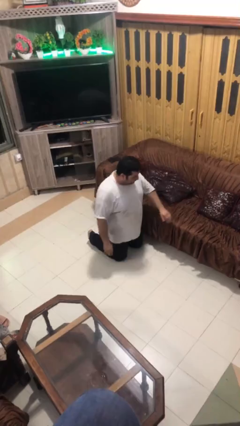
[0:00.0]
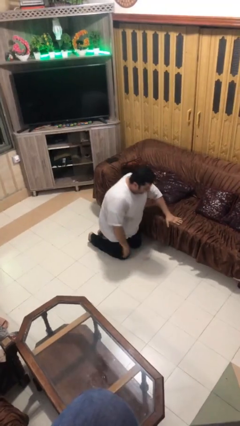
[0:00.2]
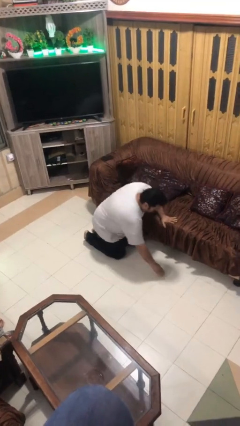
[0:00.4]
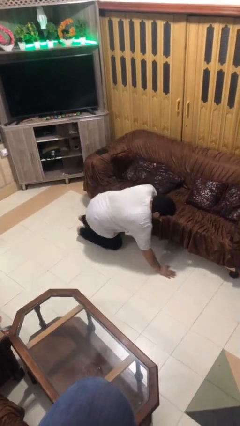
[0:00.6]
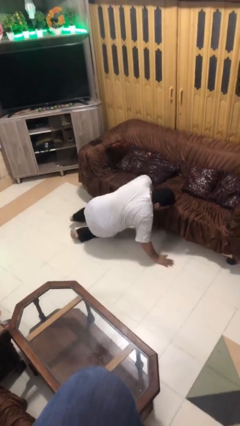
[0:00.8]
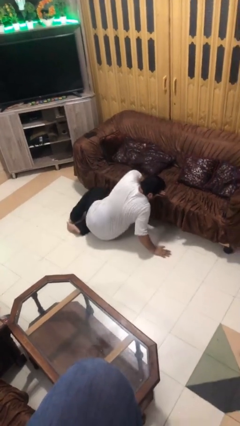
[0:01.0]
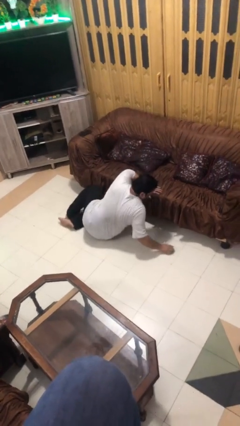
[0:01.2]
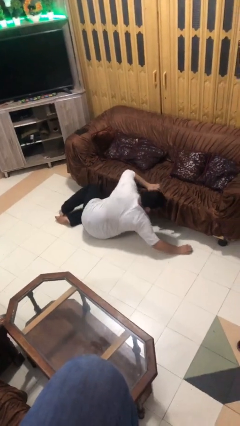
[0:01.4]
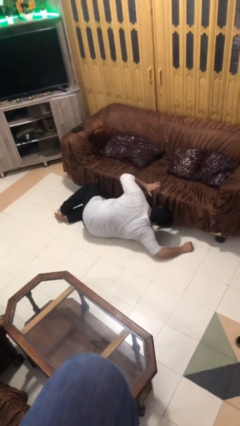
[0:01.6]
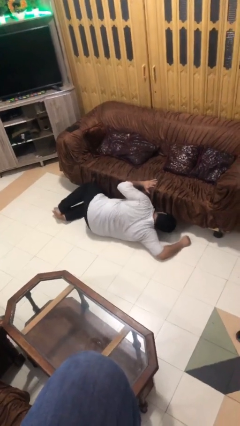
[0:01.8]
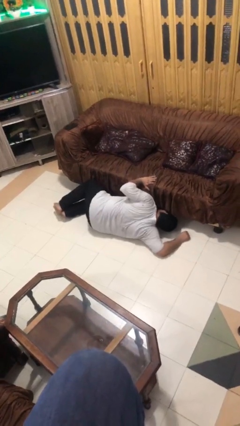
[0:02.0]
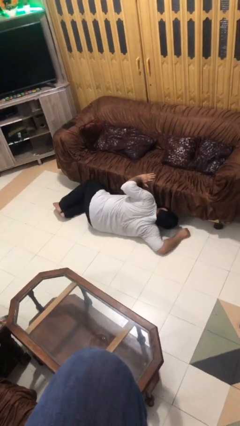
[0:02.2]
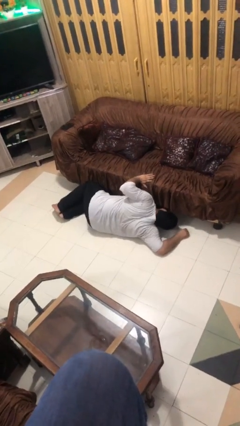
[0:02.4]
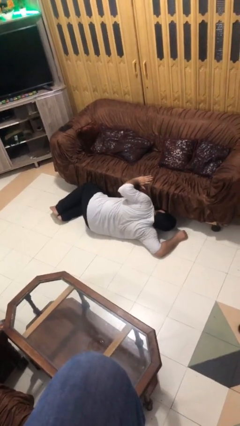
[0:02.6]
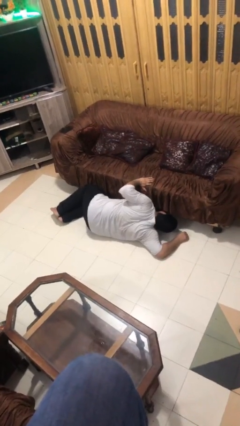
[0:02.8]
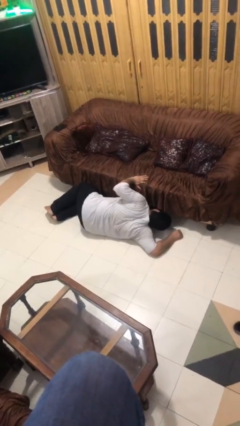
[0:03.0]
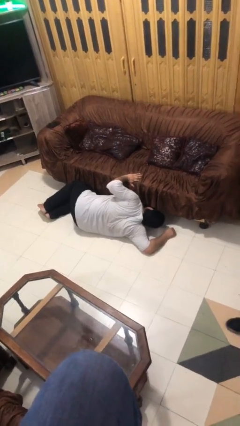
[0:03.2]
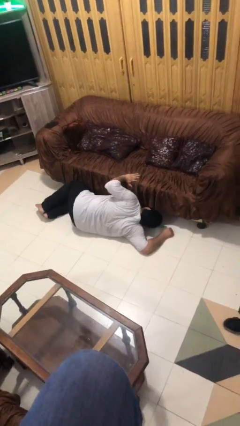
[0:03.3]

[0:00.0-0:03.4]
person searches under couch

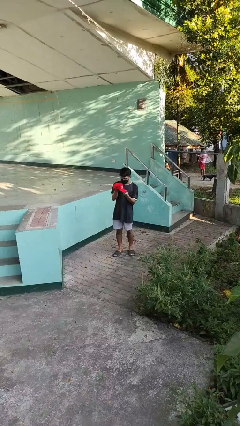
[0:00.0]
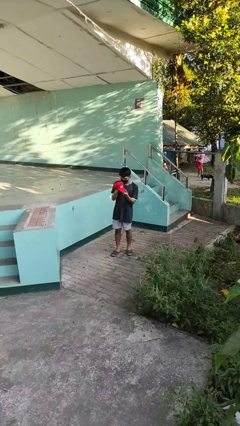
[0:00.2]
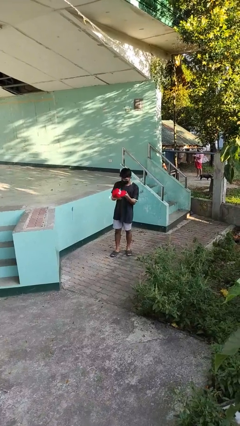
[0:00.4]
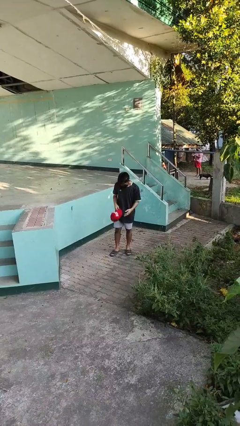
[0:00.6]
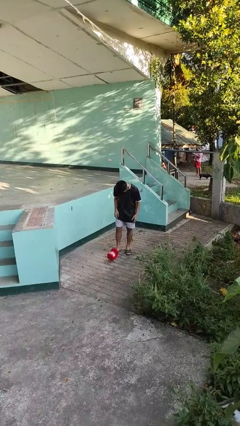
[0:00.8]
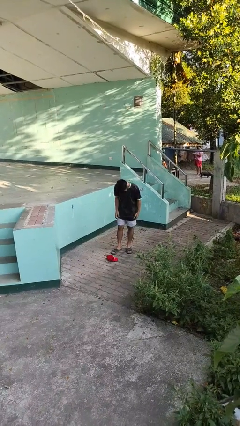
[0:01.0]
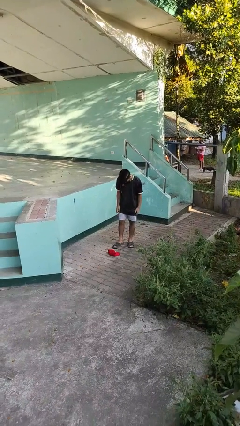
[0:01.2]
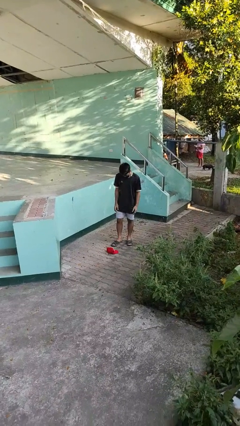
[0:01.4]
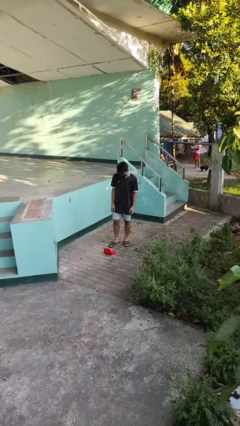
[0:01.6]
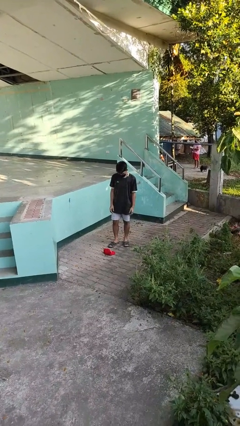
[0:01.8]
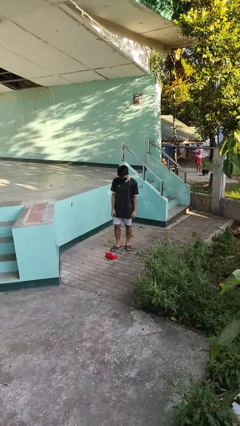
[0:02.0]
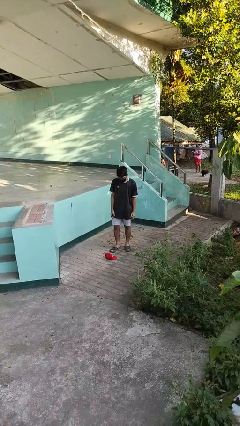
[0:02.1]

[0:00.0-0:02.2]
person drops object

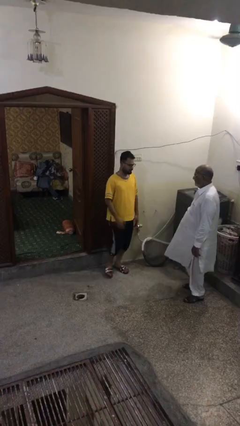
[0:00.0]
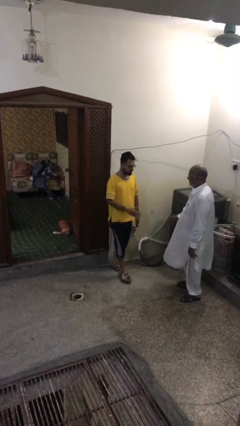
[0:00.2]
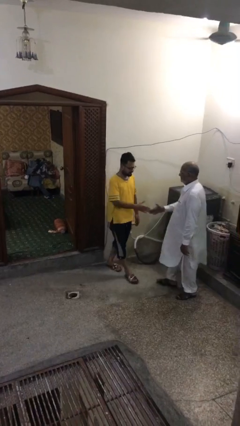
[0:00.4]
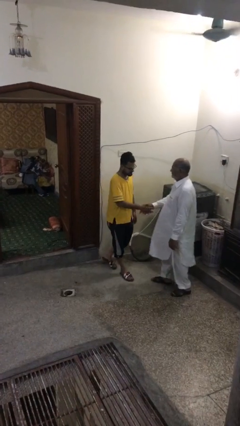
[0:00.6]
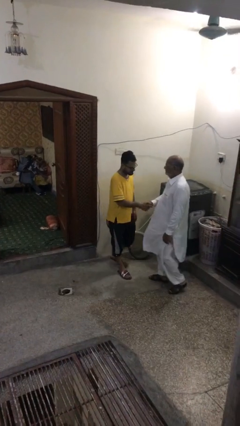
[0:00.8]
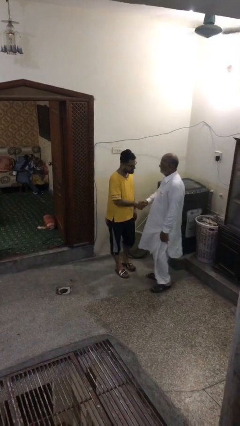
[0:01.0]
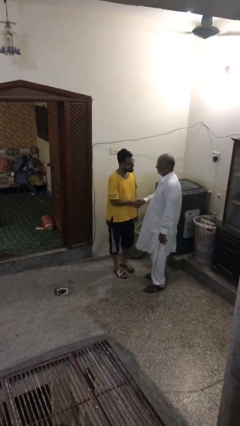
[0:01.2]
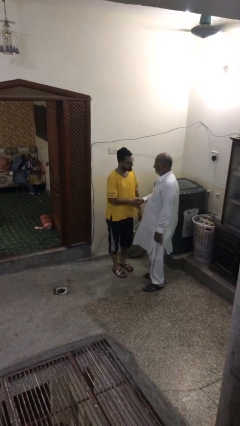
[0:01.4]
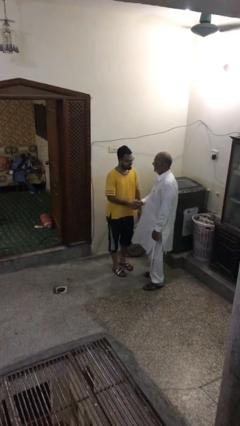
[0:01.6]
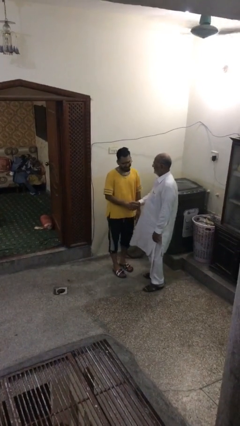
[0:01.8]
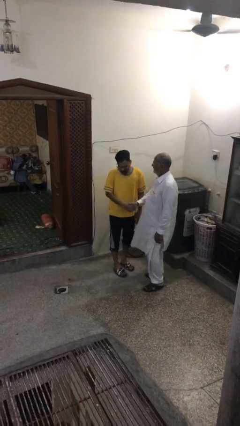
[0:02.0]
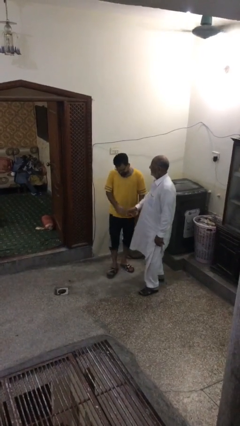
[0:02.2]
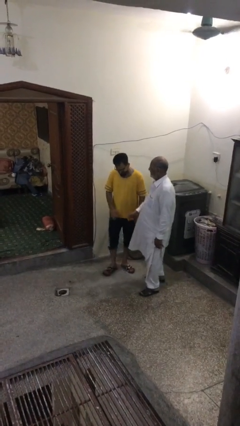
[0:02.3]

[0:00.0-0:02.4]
person shakes hand

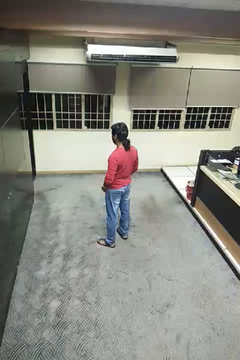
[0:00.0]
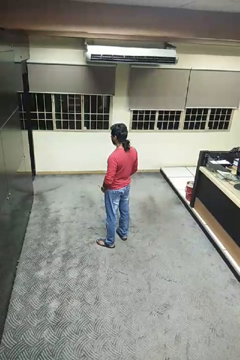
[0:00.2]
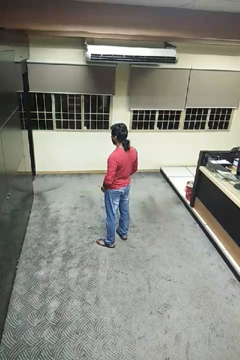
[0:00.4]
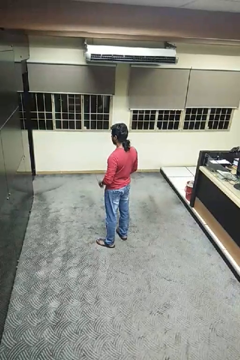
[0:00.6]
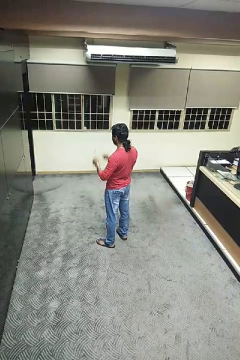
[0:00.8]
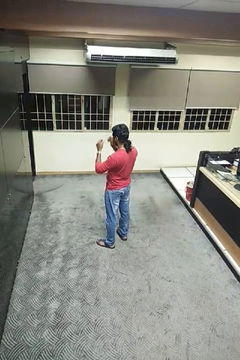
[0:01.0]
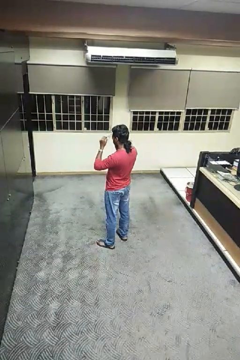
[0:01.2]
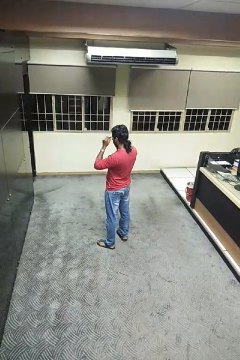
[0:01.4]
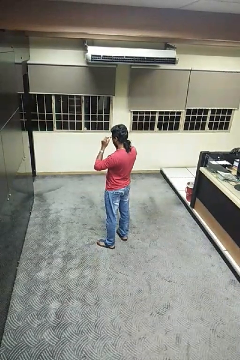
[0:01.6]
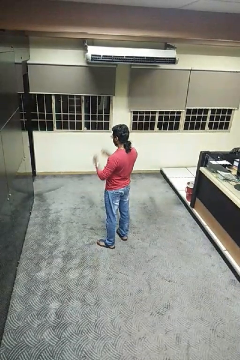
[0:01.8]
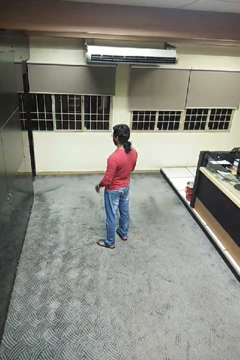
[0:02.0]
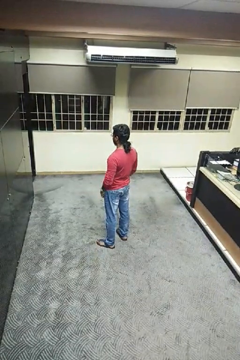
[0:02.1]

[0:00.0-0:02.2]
person puts on glasses

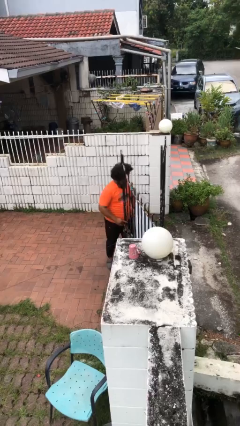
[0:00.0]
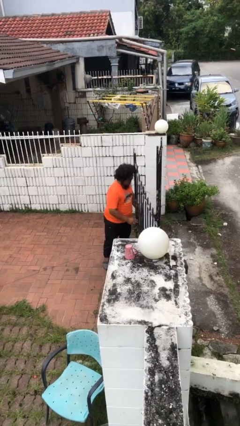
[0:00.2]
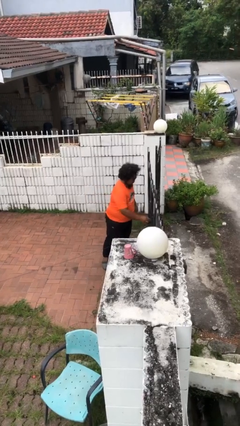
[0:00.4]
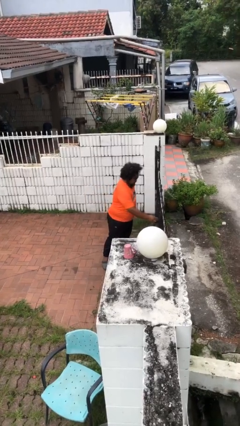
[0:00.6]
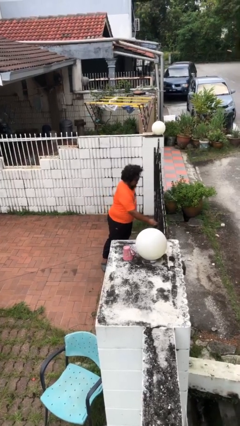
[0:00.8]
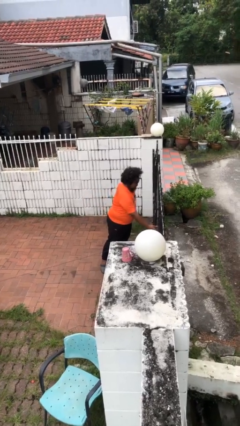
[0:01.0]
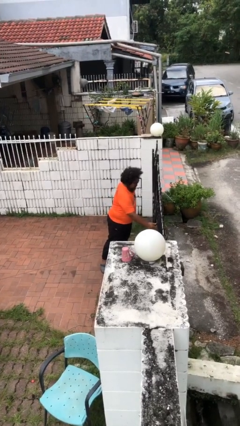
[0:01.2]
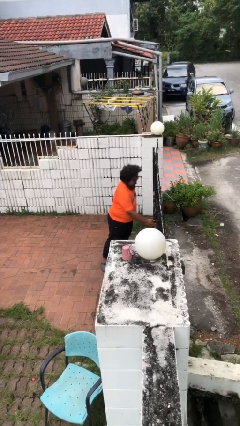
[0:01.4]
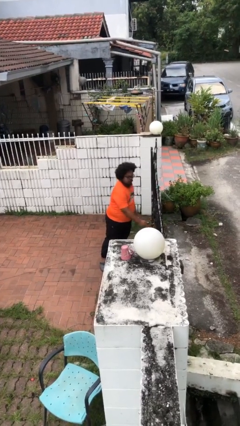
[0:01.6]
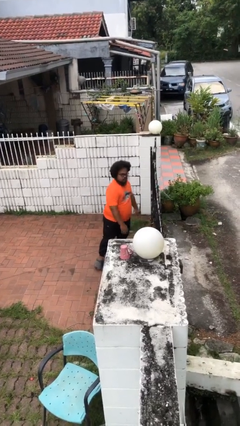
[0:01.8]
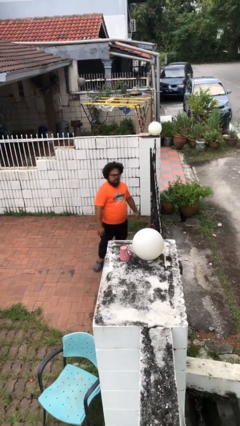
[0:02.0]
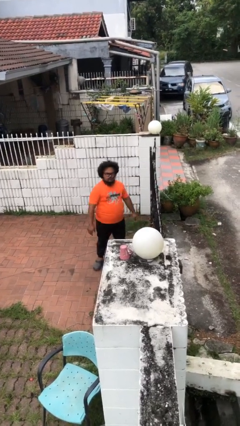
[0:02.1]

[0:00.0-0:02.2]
person closes facility door

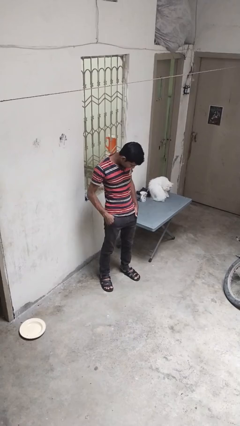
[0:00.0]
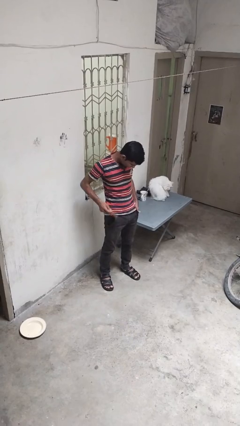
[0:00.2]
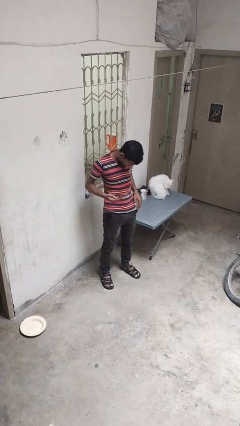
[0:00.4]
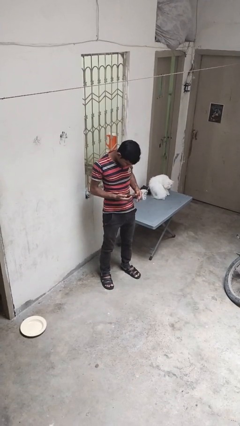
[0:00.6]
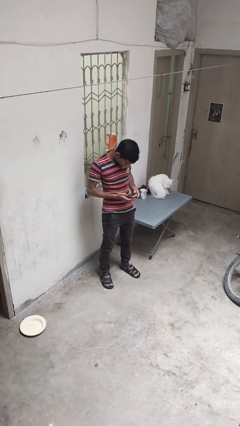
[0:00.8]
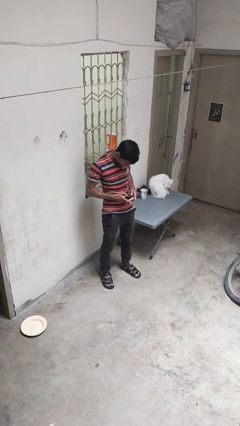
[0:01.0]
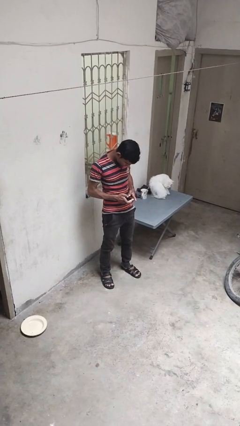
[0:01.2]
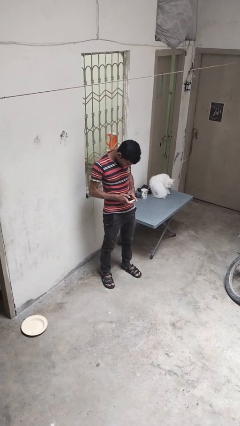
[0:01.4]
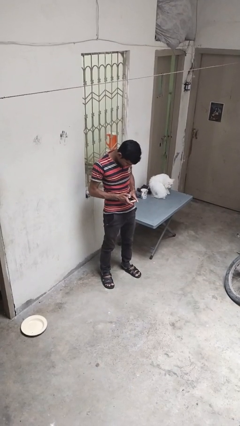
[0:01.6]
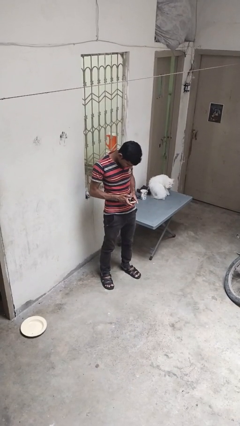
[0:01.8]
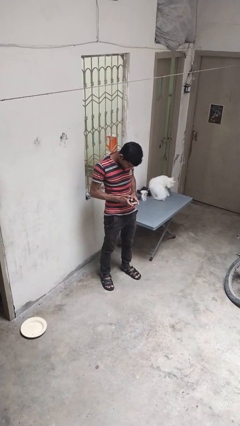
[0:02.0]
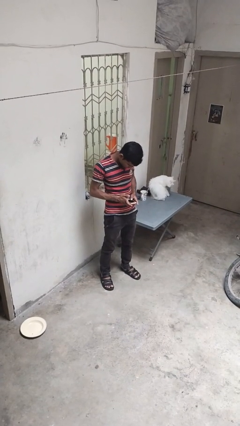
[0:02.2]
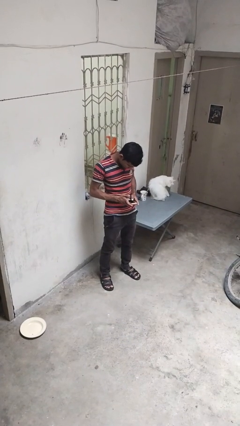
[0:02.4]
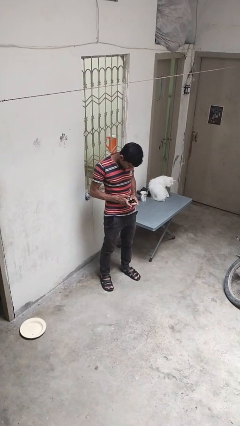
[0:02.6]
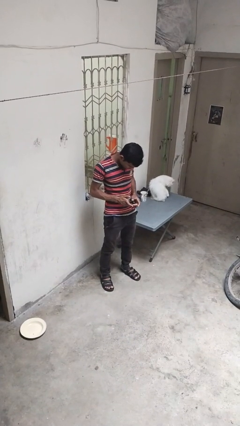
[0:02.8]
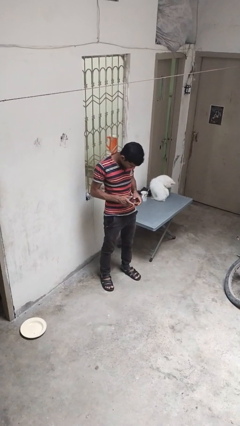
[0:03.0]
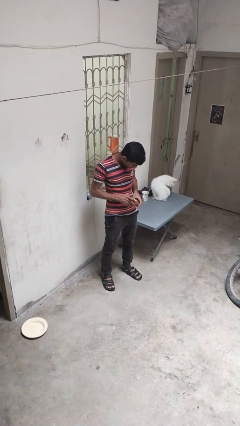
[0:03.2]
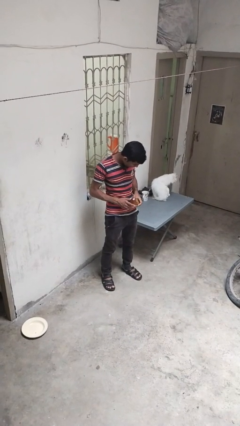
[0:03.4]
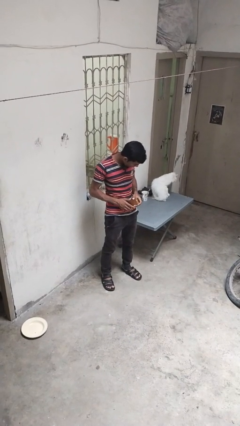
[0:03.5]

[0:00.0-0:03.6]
person takes phone from pocket

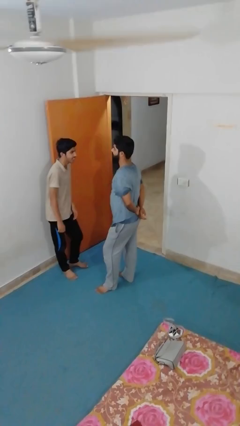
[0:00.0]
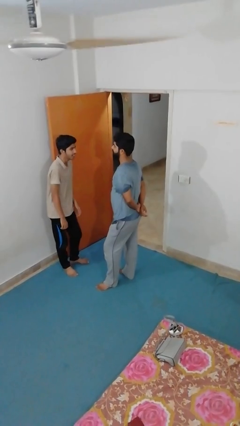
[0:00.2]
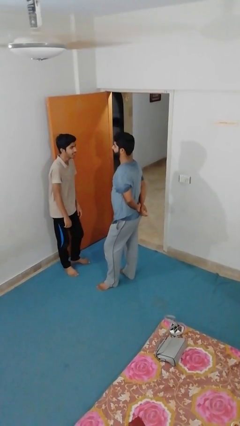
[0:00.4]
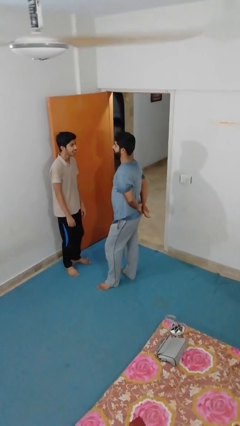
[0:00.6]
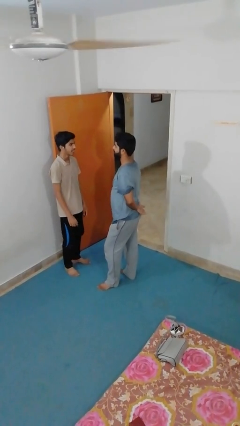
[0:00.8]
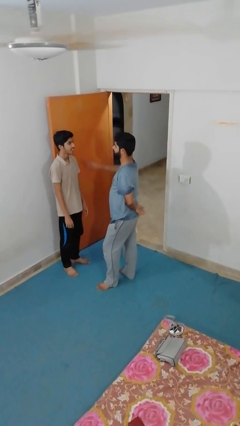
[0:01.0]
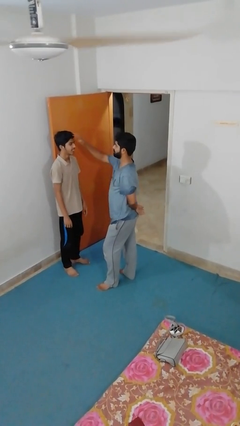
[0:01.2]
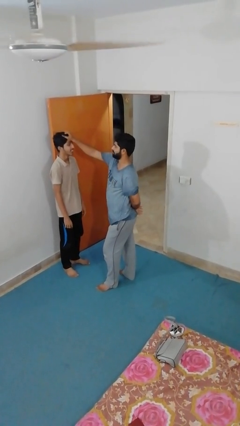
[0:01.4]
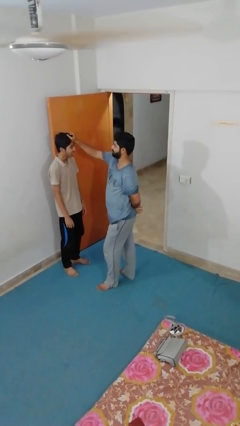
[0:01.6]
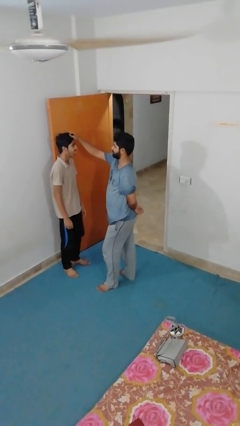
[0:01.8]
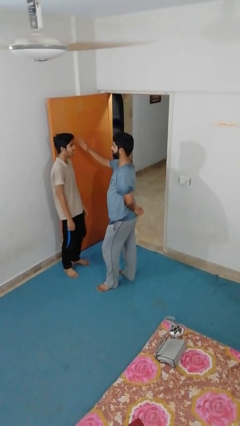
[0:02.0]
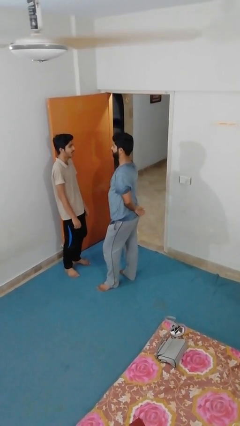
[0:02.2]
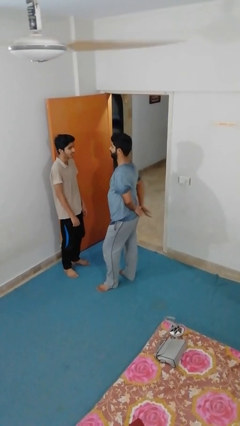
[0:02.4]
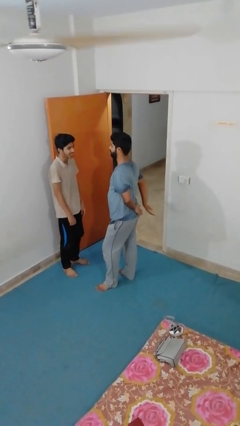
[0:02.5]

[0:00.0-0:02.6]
person grabs person by hair
